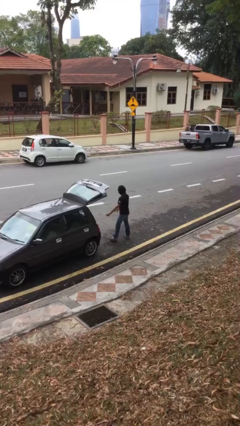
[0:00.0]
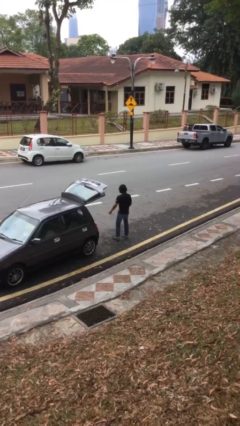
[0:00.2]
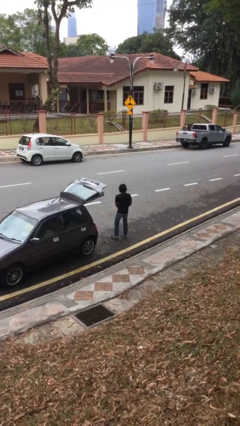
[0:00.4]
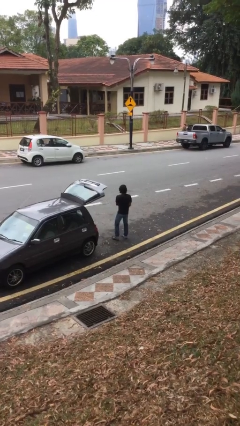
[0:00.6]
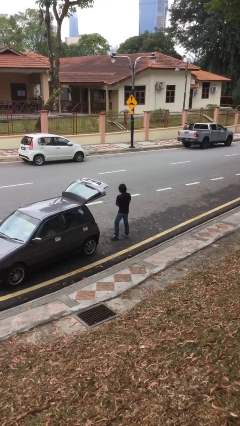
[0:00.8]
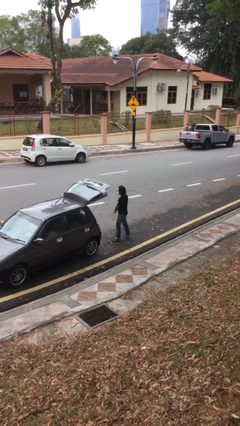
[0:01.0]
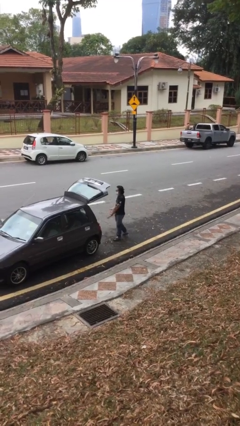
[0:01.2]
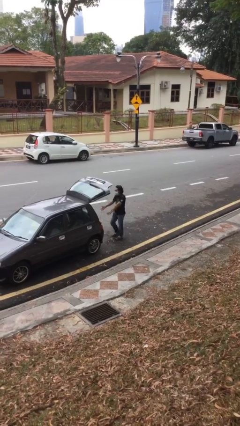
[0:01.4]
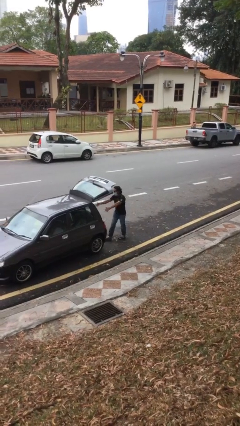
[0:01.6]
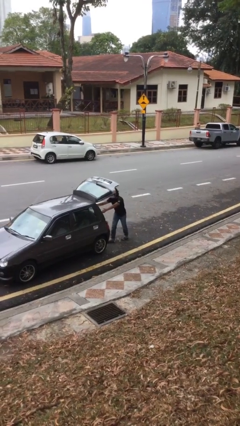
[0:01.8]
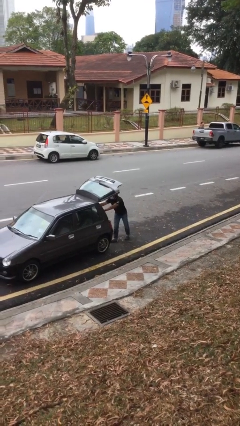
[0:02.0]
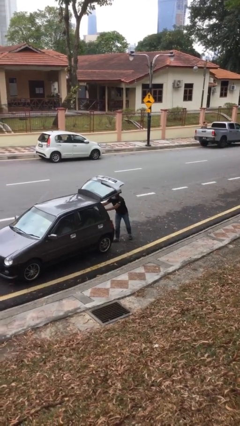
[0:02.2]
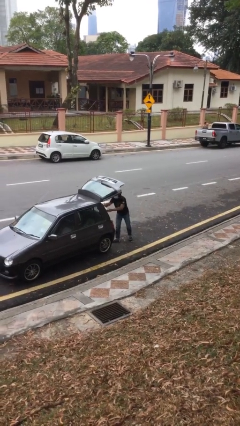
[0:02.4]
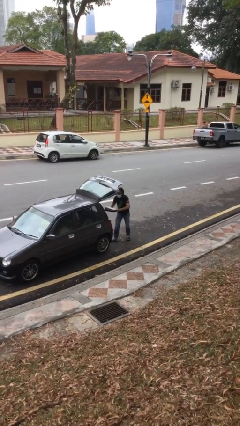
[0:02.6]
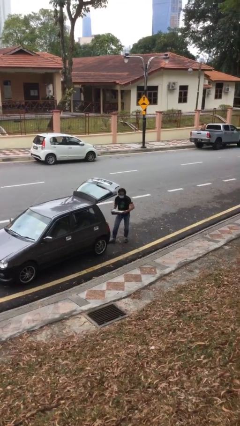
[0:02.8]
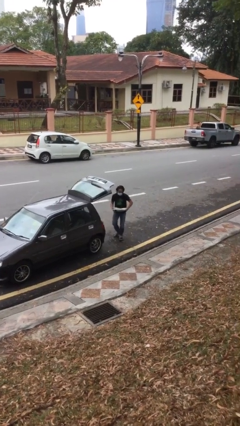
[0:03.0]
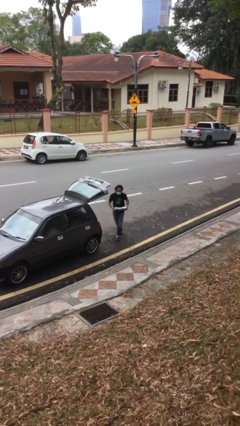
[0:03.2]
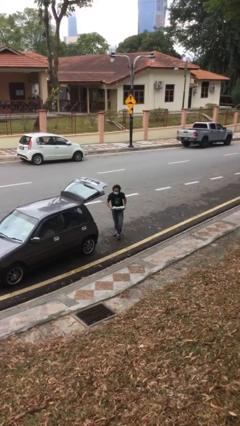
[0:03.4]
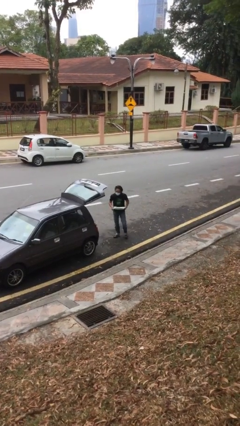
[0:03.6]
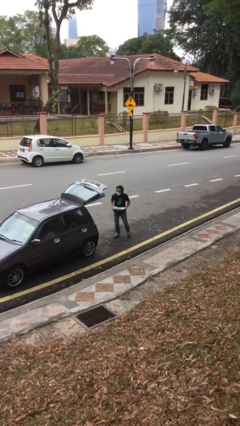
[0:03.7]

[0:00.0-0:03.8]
person unloads car

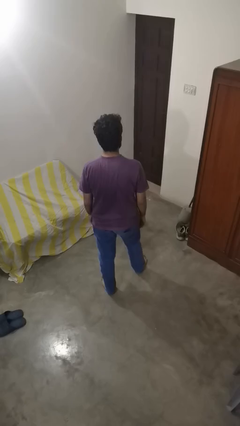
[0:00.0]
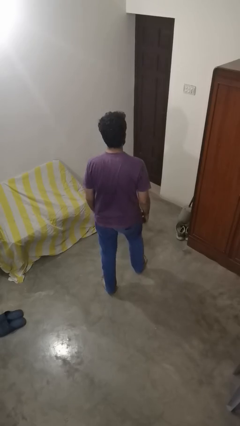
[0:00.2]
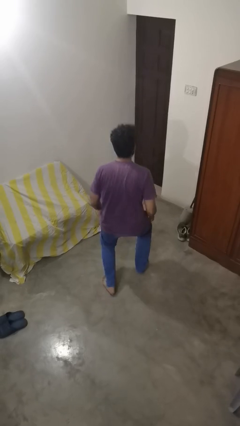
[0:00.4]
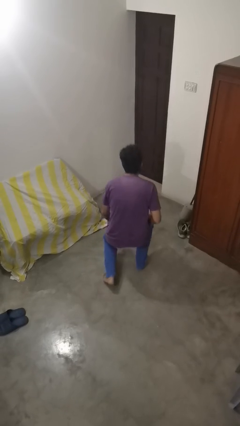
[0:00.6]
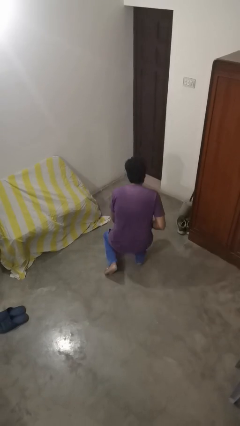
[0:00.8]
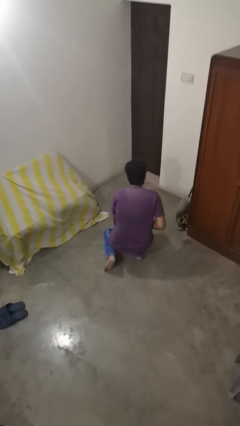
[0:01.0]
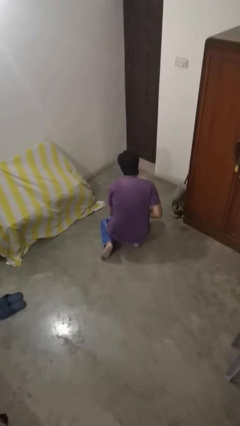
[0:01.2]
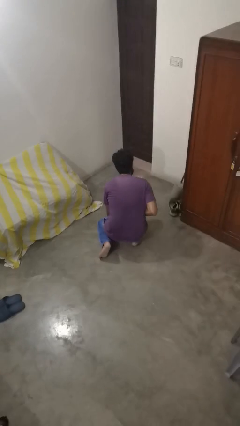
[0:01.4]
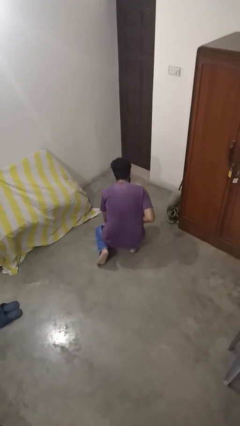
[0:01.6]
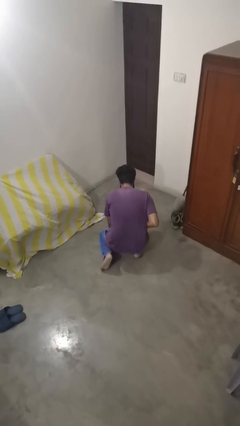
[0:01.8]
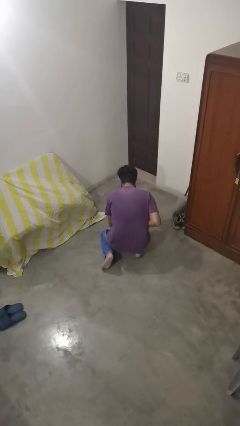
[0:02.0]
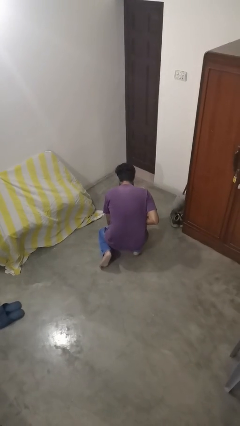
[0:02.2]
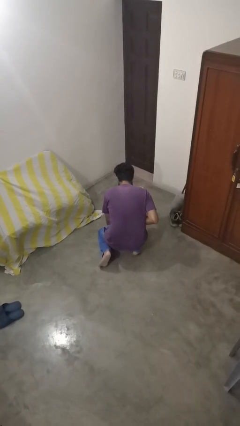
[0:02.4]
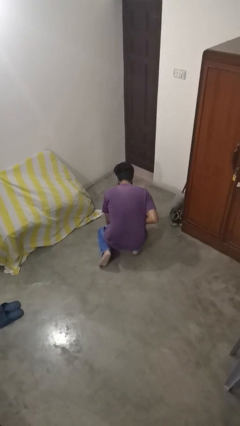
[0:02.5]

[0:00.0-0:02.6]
person kneels

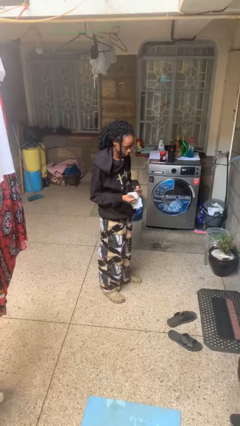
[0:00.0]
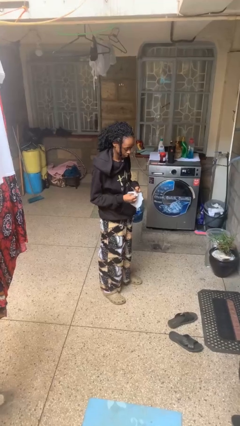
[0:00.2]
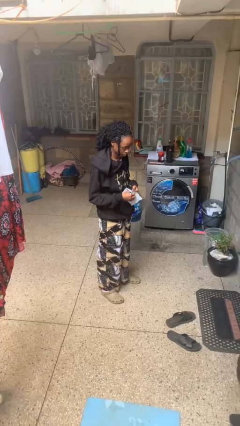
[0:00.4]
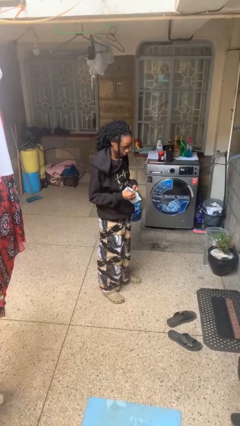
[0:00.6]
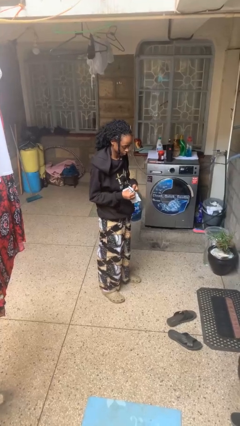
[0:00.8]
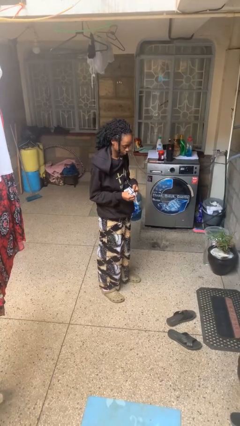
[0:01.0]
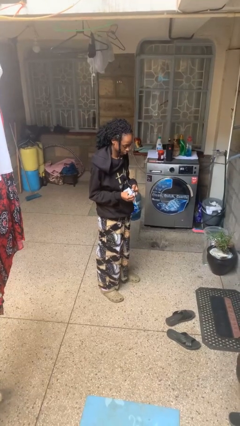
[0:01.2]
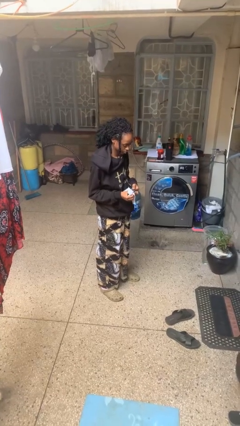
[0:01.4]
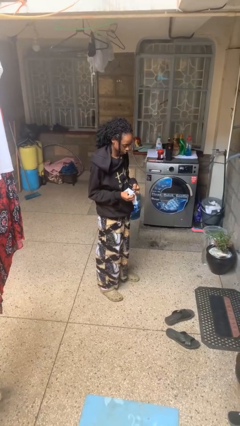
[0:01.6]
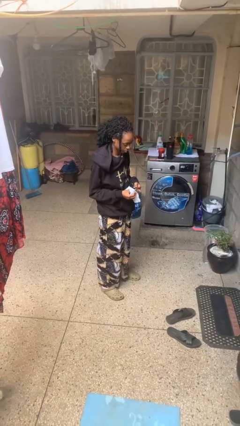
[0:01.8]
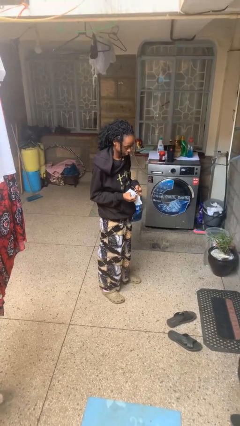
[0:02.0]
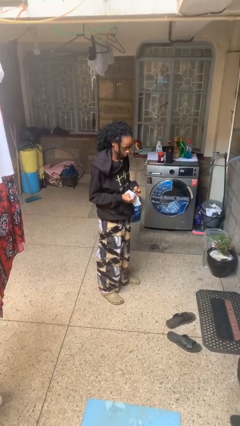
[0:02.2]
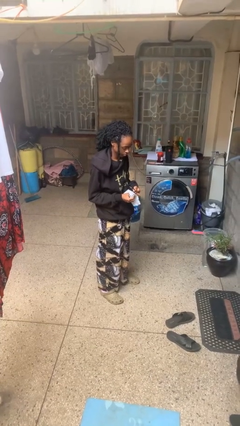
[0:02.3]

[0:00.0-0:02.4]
person cleans eyeglasses

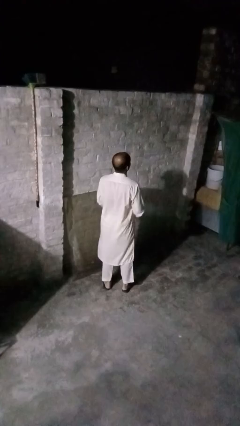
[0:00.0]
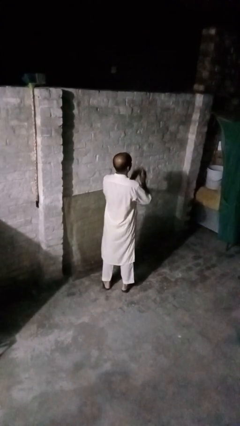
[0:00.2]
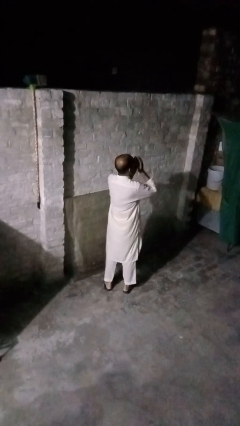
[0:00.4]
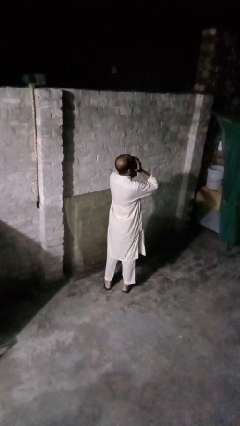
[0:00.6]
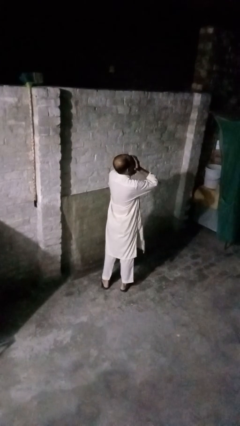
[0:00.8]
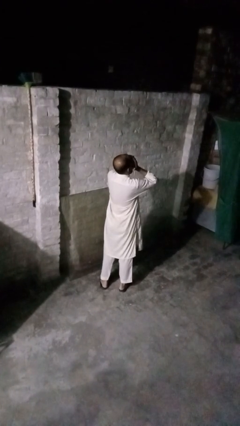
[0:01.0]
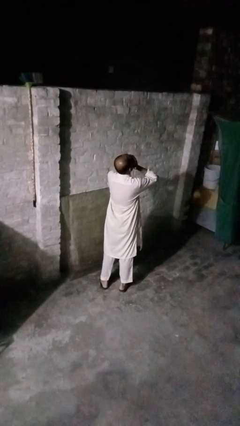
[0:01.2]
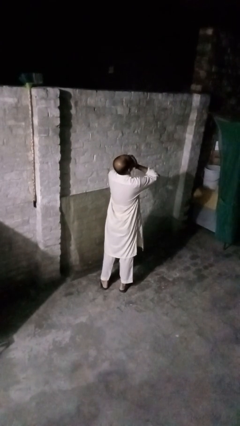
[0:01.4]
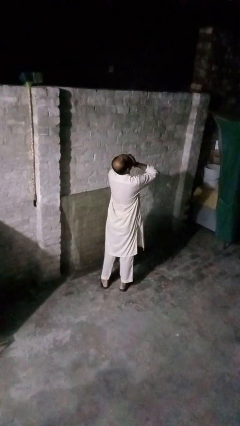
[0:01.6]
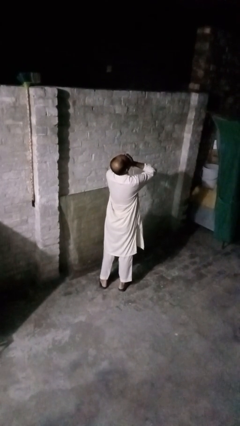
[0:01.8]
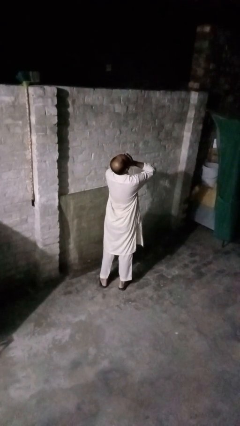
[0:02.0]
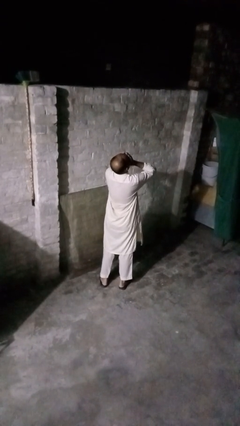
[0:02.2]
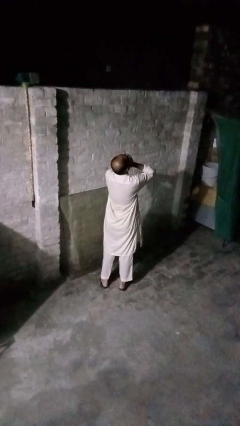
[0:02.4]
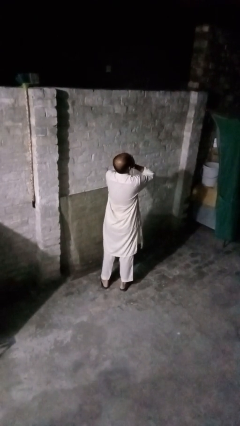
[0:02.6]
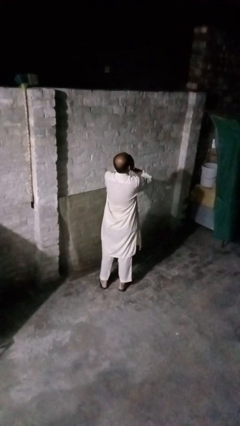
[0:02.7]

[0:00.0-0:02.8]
person sneezes into hand

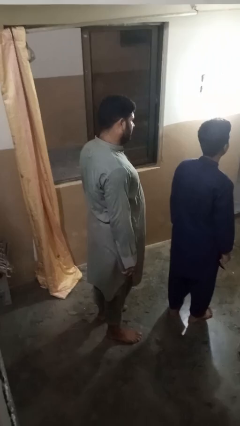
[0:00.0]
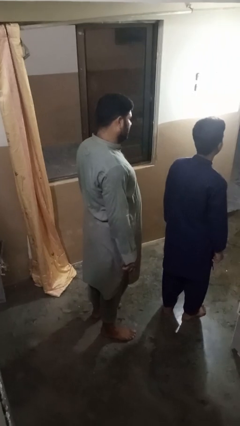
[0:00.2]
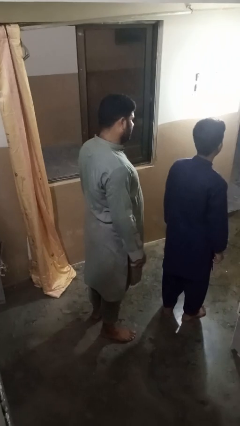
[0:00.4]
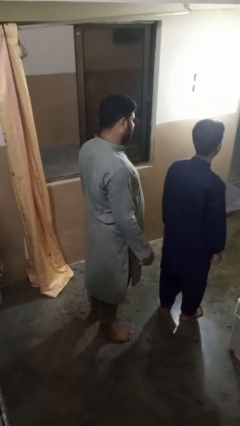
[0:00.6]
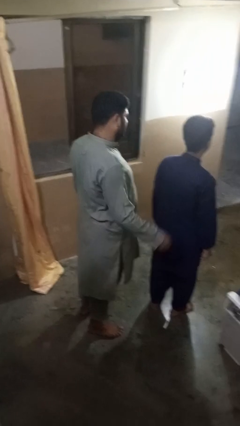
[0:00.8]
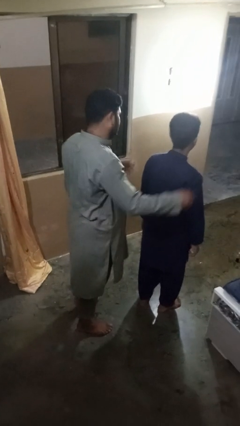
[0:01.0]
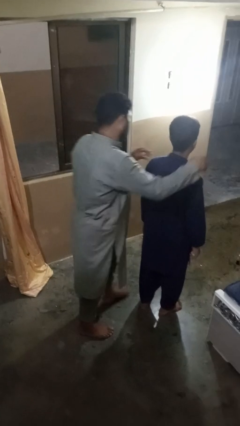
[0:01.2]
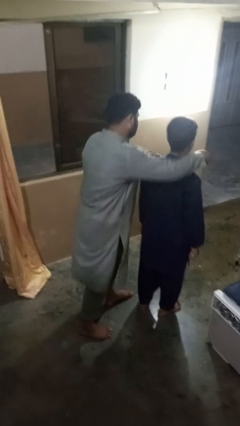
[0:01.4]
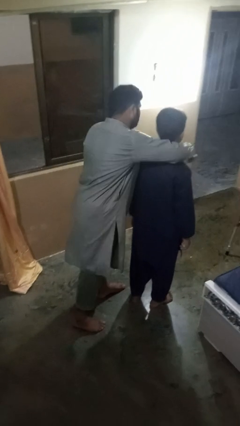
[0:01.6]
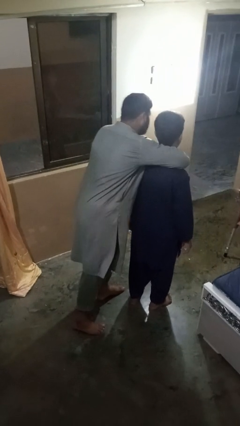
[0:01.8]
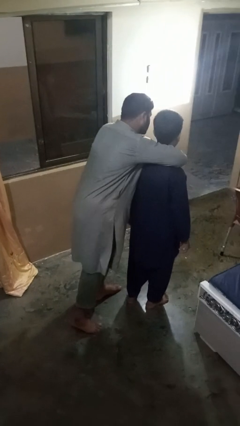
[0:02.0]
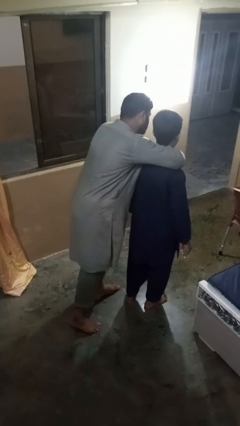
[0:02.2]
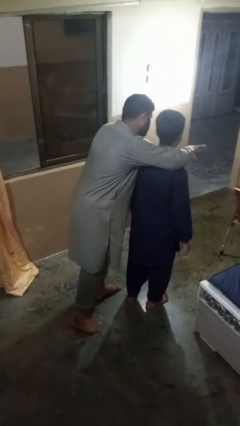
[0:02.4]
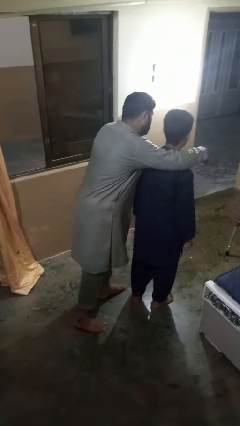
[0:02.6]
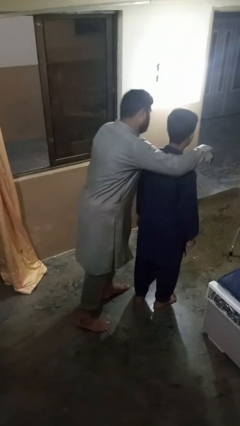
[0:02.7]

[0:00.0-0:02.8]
person hugs person from behind

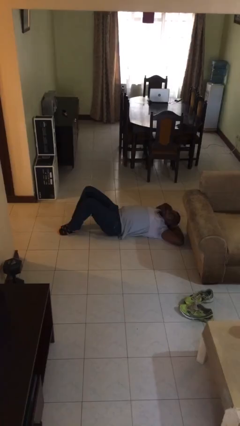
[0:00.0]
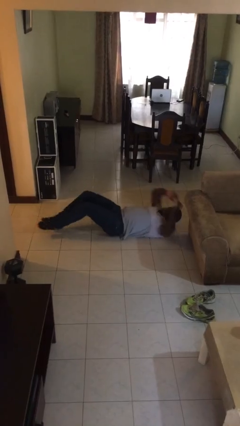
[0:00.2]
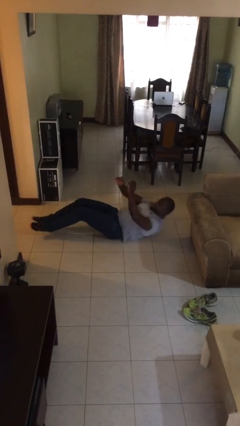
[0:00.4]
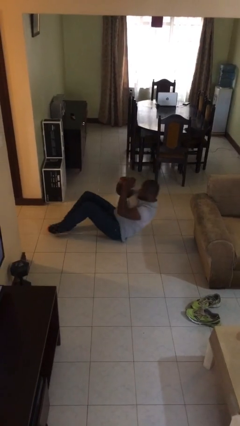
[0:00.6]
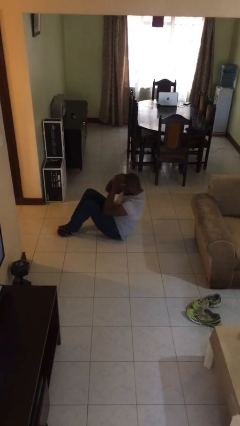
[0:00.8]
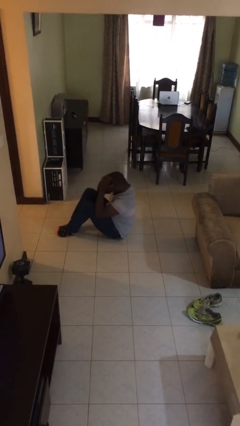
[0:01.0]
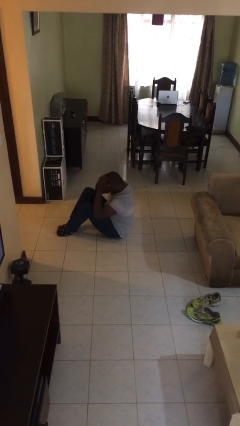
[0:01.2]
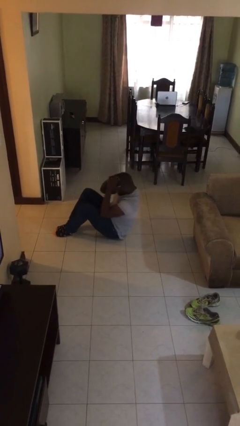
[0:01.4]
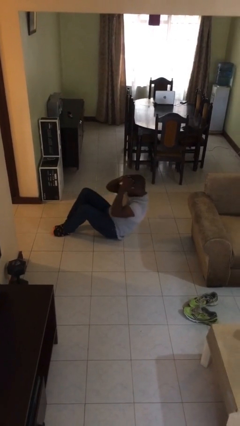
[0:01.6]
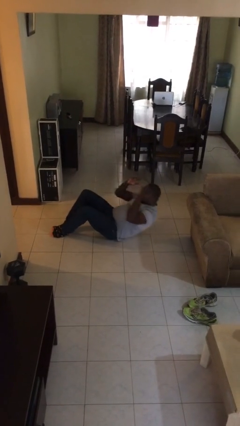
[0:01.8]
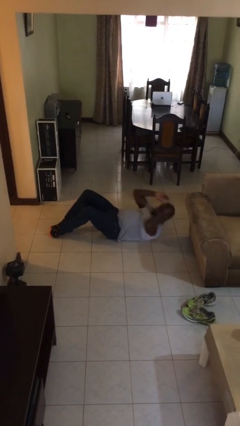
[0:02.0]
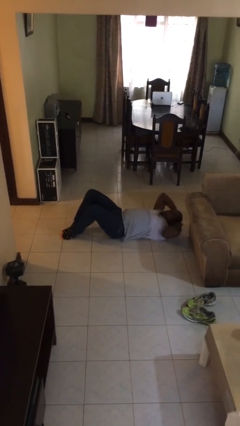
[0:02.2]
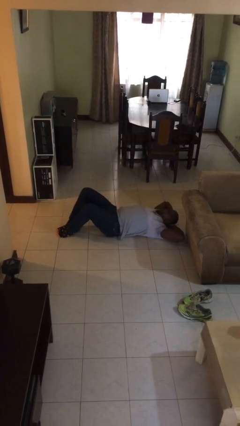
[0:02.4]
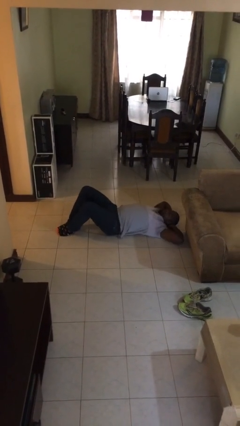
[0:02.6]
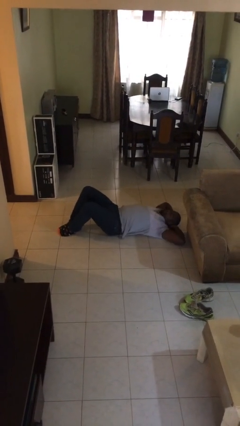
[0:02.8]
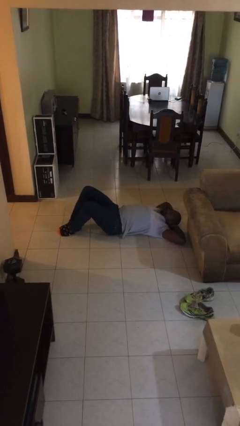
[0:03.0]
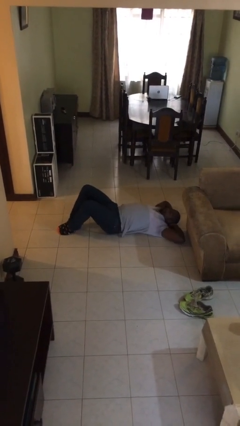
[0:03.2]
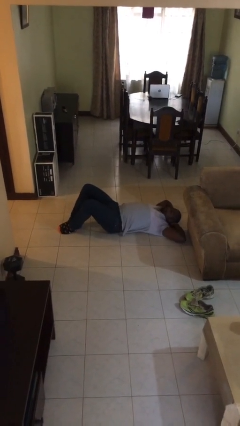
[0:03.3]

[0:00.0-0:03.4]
person exercises with situp
